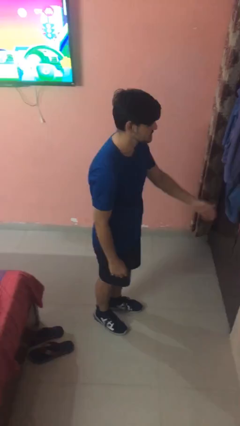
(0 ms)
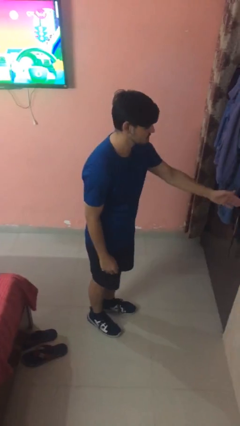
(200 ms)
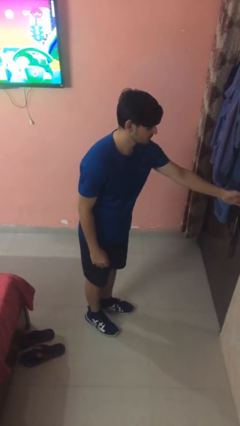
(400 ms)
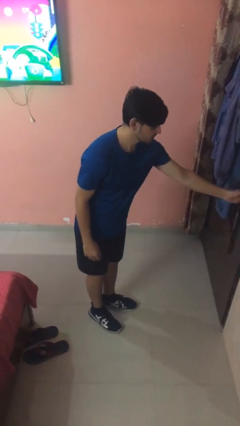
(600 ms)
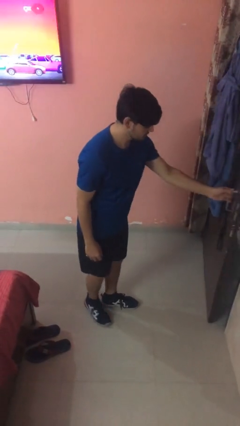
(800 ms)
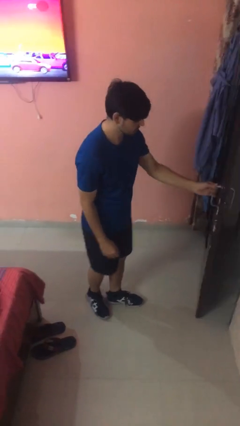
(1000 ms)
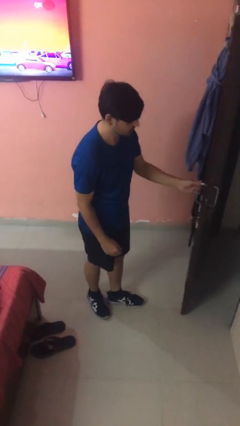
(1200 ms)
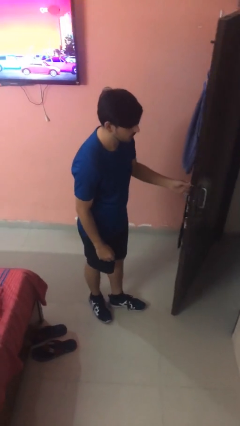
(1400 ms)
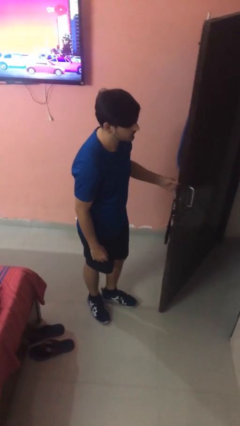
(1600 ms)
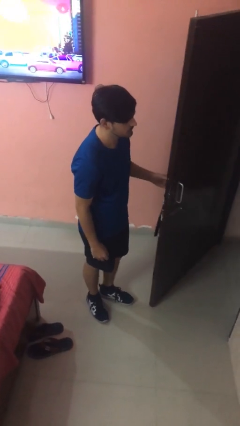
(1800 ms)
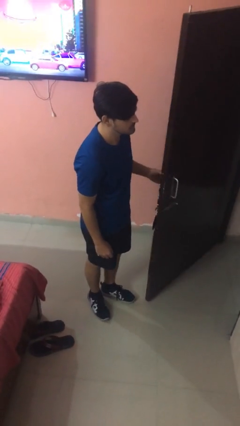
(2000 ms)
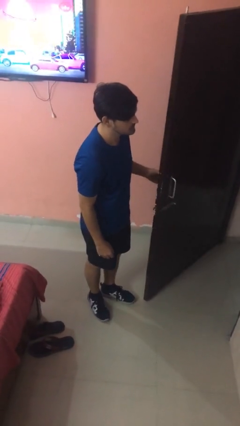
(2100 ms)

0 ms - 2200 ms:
person opens facility door

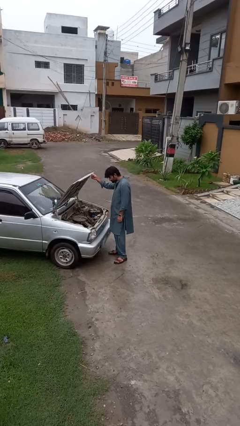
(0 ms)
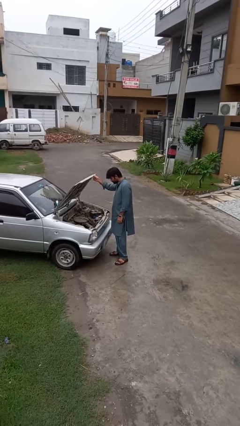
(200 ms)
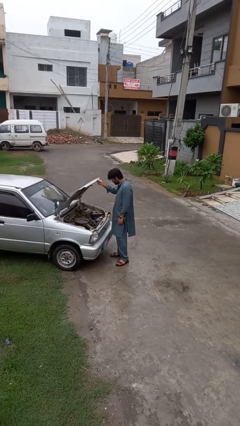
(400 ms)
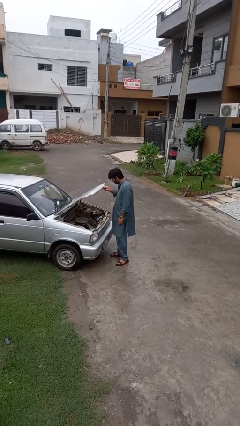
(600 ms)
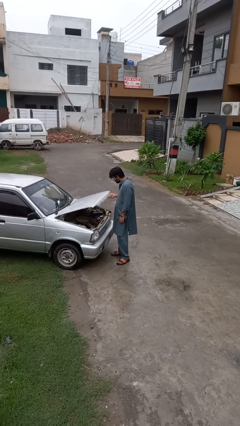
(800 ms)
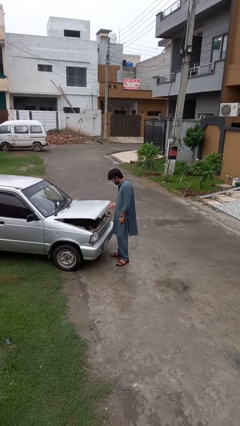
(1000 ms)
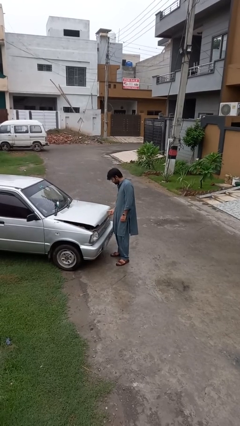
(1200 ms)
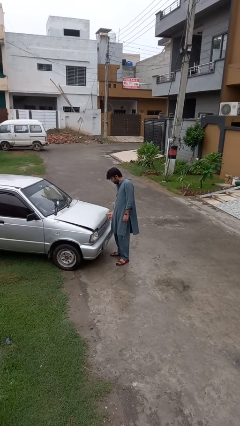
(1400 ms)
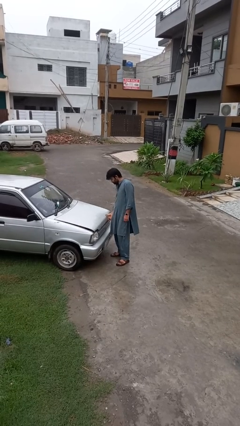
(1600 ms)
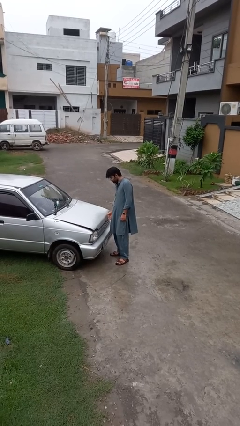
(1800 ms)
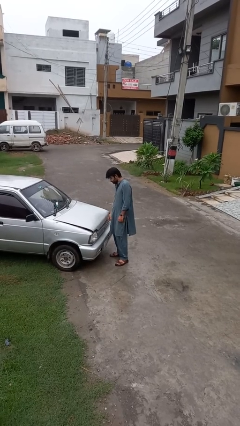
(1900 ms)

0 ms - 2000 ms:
person closes car hood

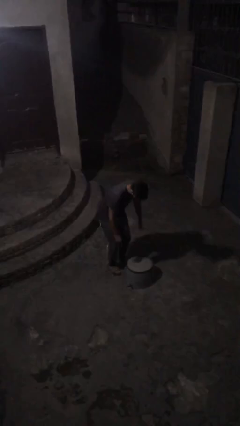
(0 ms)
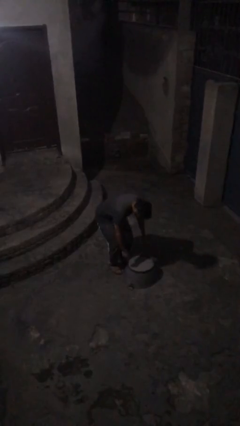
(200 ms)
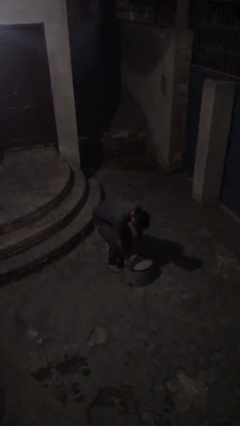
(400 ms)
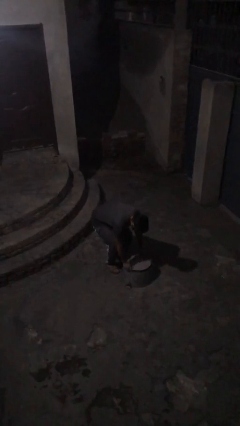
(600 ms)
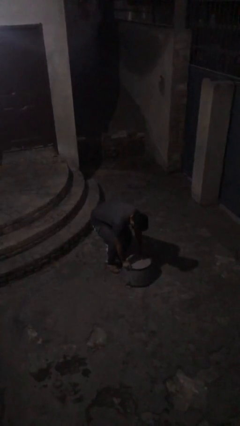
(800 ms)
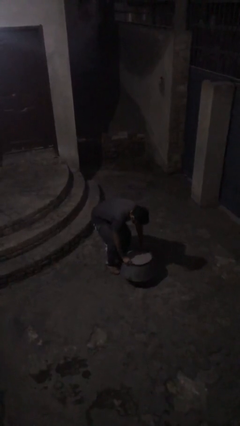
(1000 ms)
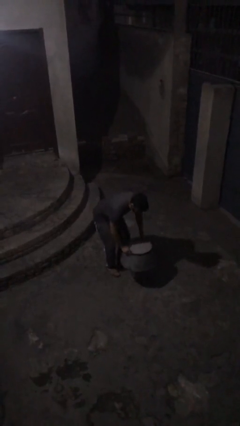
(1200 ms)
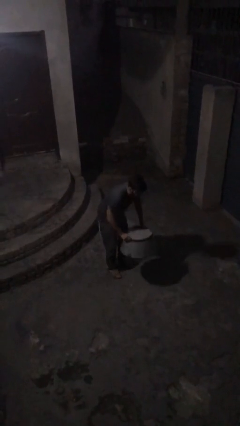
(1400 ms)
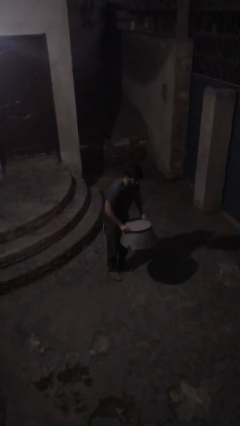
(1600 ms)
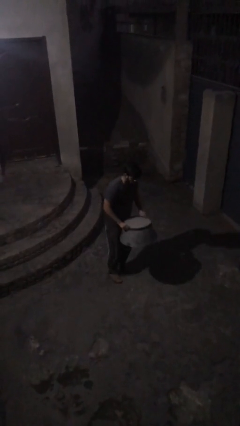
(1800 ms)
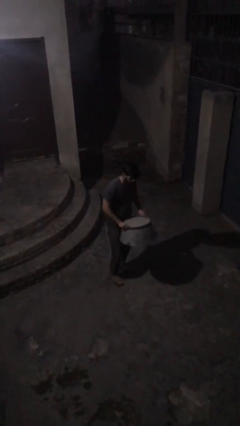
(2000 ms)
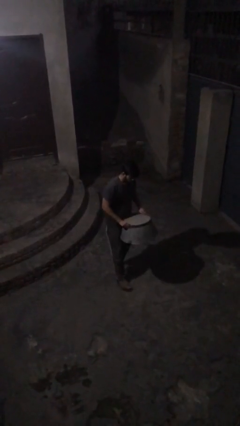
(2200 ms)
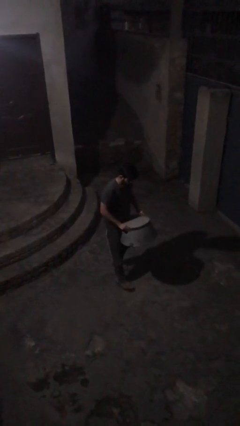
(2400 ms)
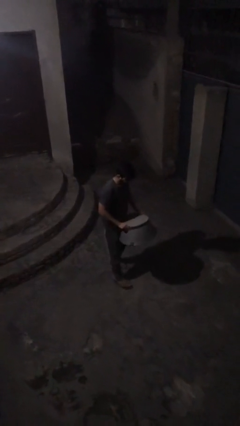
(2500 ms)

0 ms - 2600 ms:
person picks up object from floor

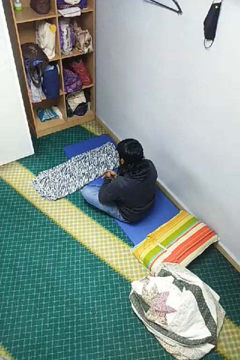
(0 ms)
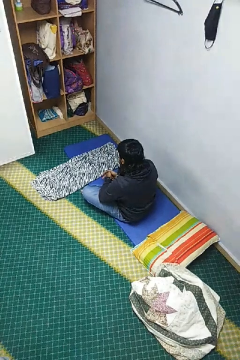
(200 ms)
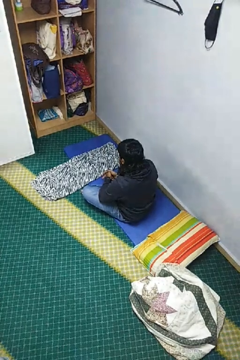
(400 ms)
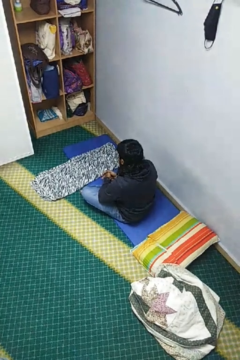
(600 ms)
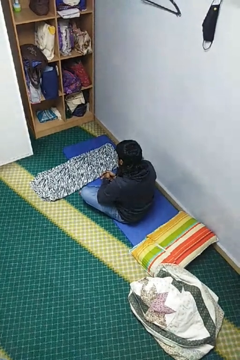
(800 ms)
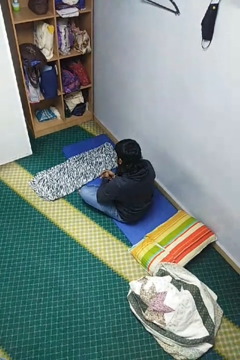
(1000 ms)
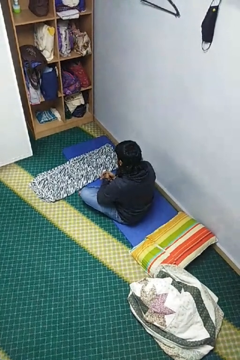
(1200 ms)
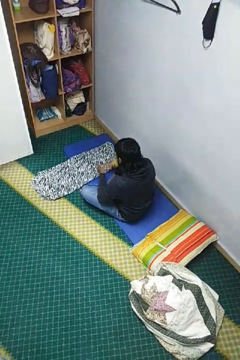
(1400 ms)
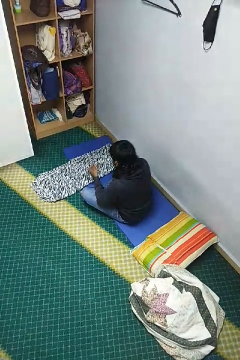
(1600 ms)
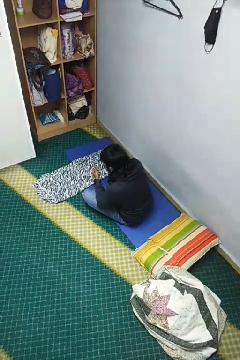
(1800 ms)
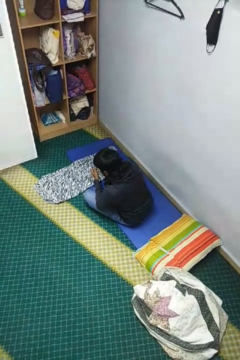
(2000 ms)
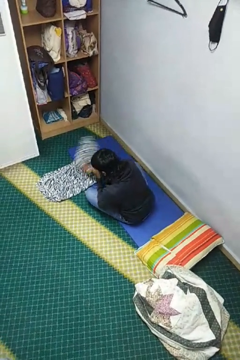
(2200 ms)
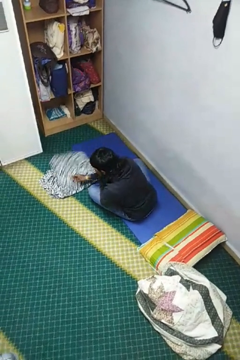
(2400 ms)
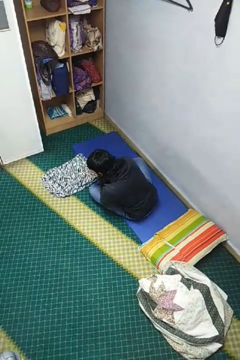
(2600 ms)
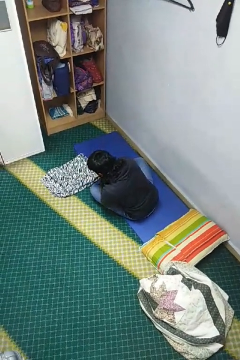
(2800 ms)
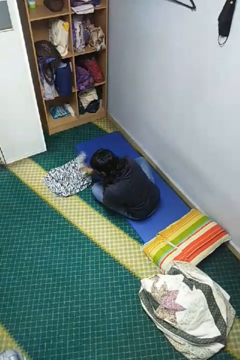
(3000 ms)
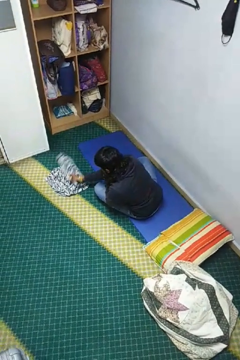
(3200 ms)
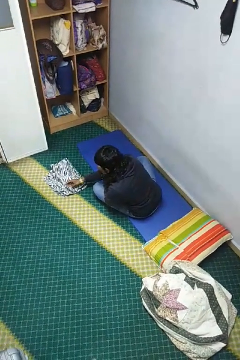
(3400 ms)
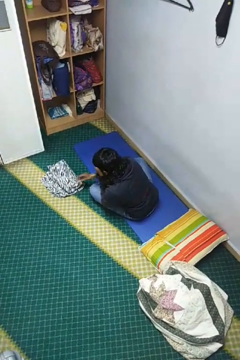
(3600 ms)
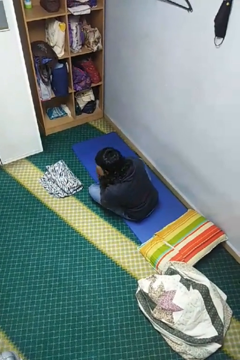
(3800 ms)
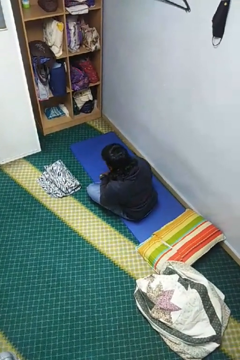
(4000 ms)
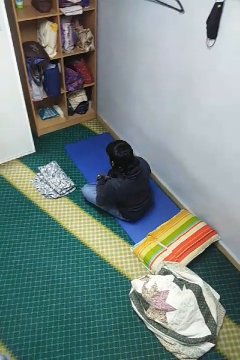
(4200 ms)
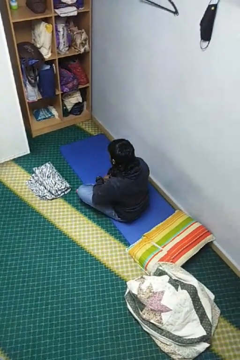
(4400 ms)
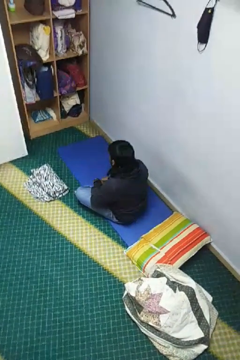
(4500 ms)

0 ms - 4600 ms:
person folds blanket

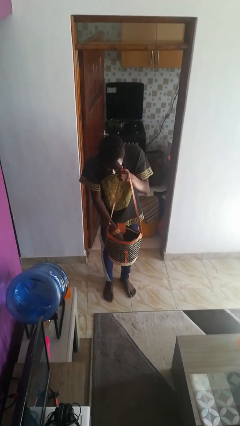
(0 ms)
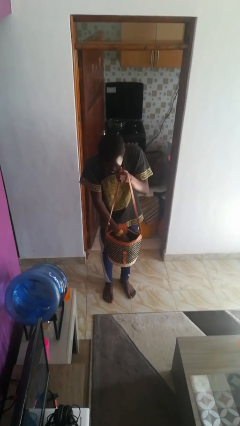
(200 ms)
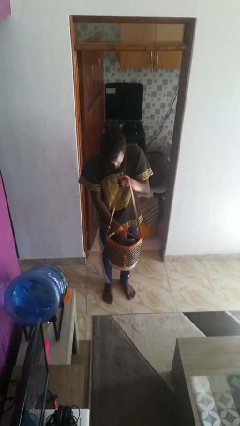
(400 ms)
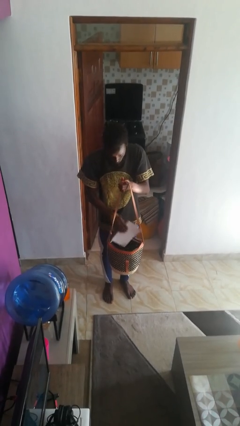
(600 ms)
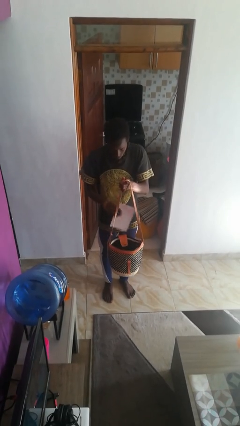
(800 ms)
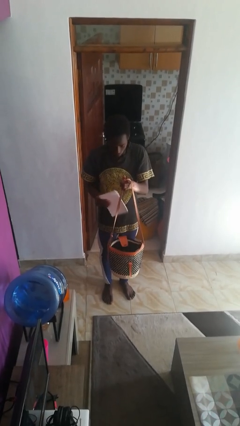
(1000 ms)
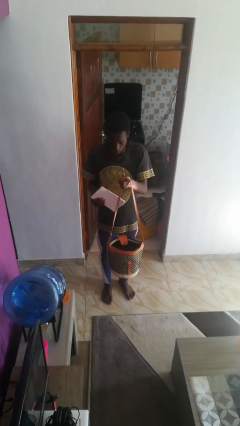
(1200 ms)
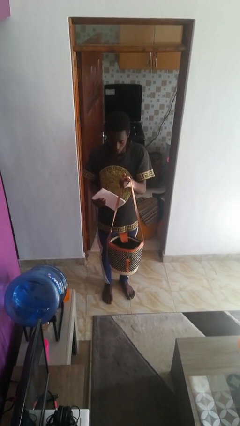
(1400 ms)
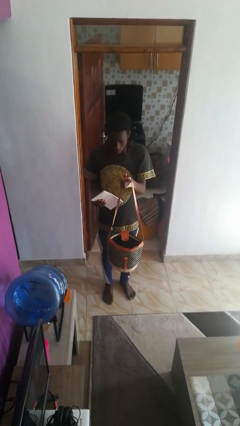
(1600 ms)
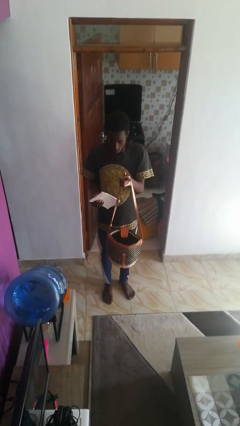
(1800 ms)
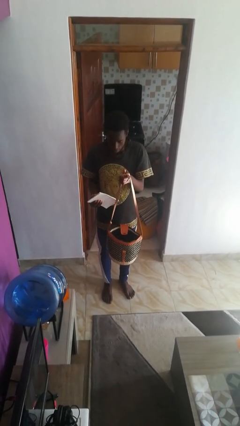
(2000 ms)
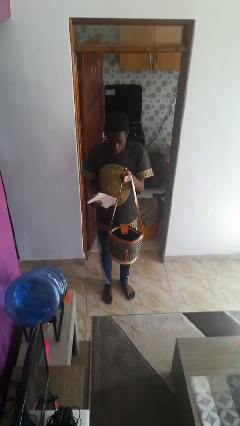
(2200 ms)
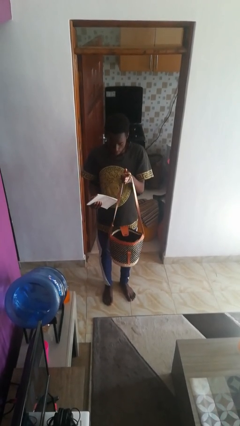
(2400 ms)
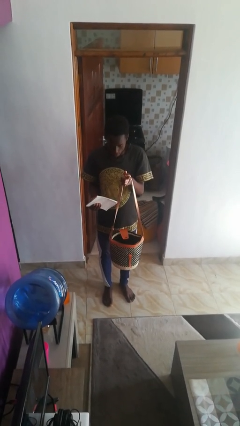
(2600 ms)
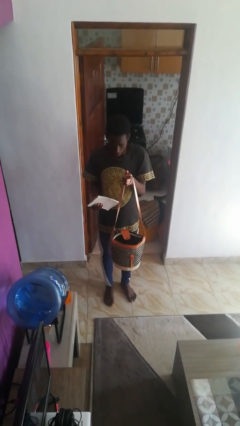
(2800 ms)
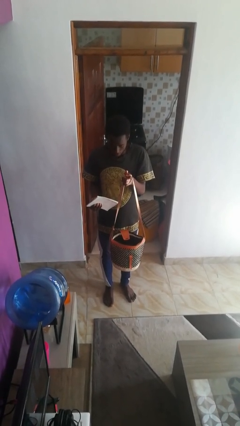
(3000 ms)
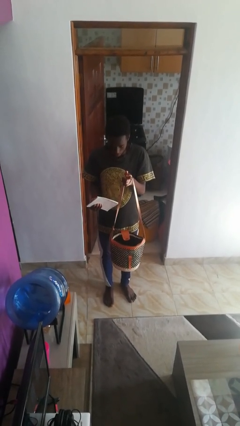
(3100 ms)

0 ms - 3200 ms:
person takes object from purse

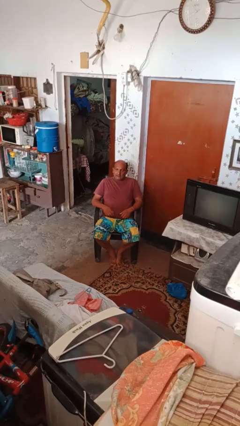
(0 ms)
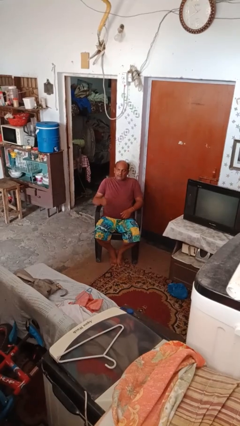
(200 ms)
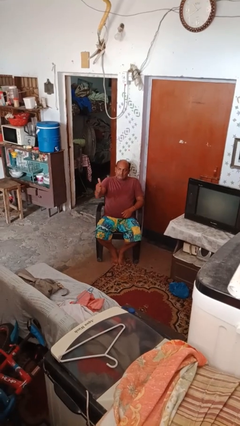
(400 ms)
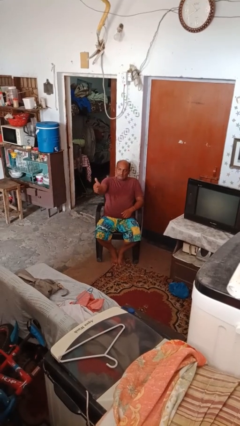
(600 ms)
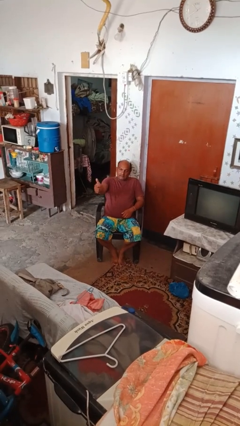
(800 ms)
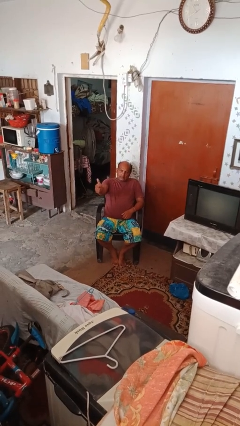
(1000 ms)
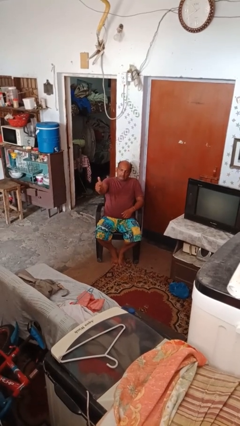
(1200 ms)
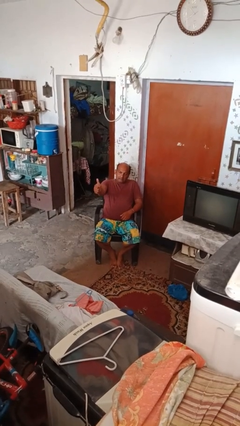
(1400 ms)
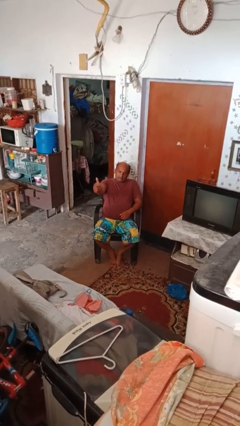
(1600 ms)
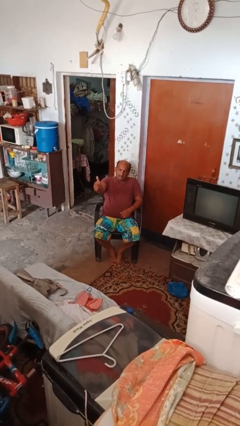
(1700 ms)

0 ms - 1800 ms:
person gestures thumbs up

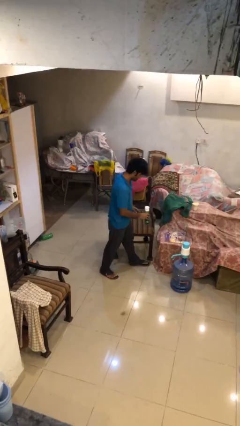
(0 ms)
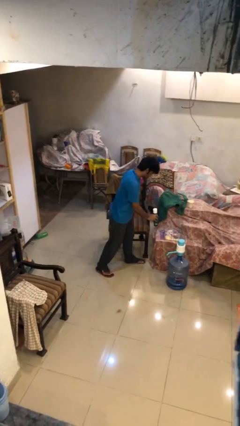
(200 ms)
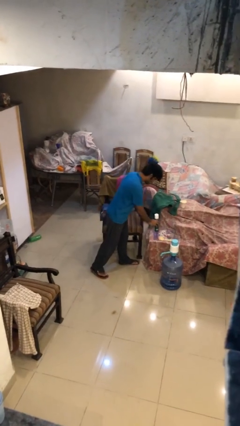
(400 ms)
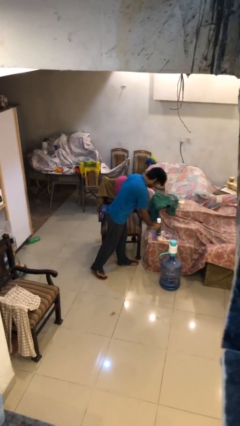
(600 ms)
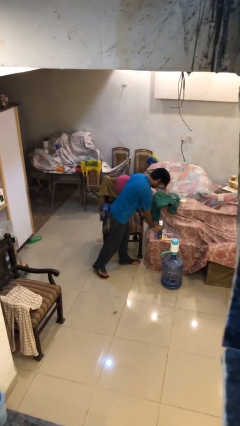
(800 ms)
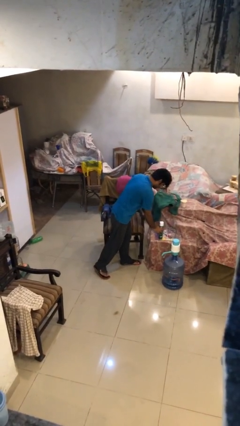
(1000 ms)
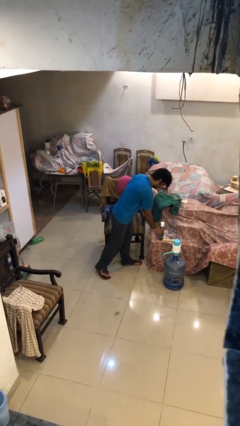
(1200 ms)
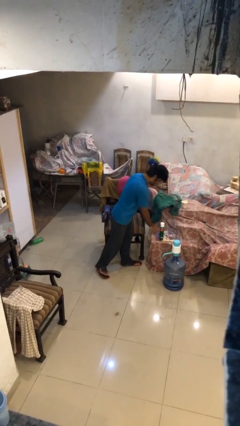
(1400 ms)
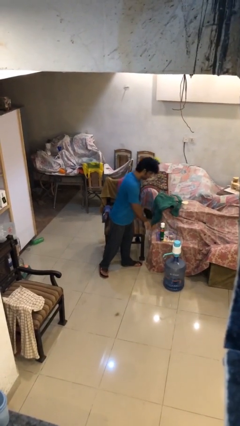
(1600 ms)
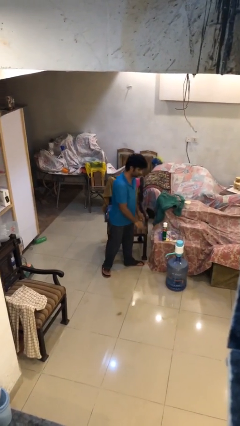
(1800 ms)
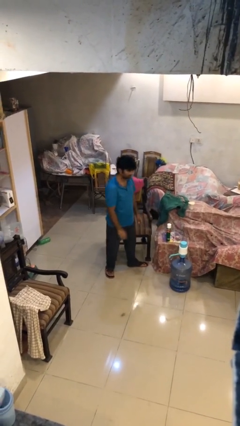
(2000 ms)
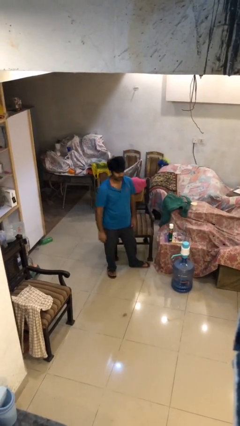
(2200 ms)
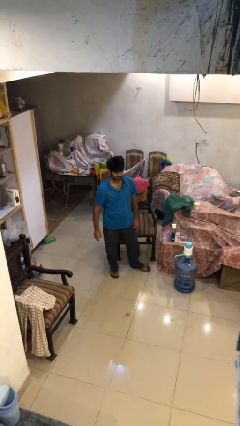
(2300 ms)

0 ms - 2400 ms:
person puts down object on table
